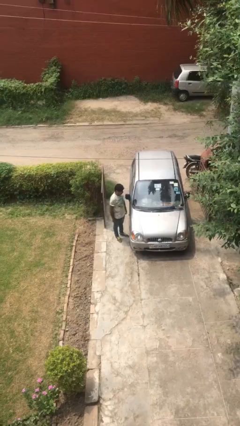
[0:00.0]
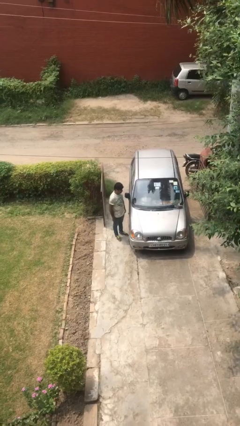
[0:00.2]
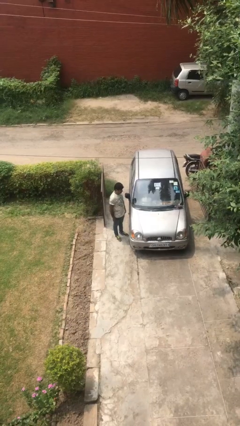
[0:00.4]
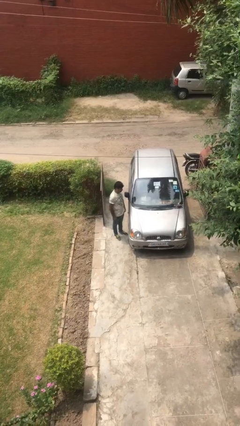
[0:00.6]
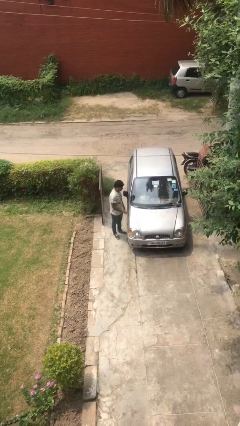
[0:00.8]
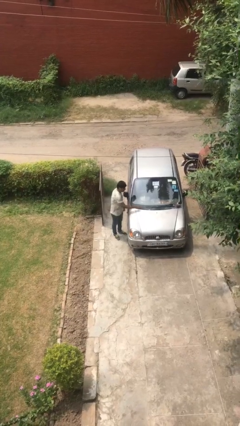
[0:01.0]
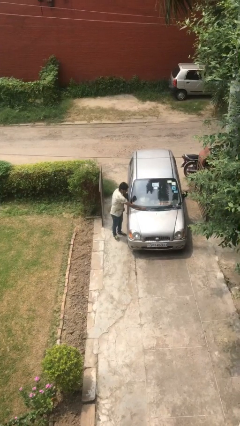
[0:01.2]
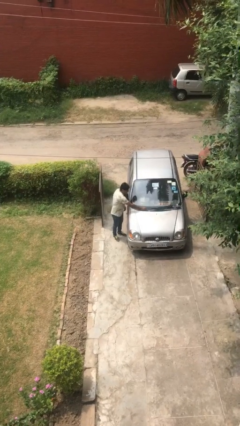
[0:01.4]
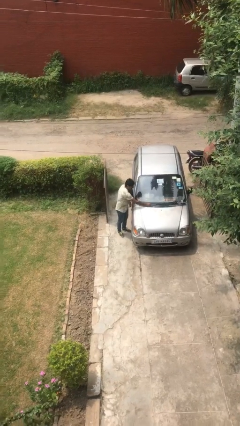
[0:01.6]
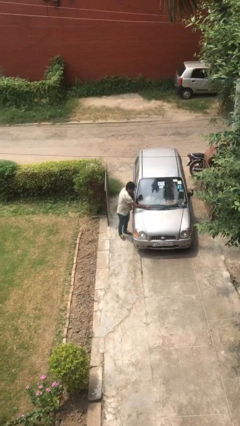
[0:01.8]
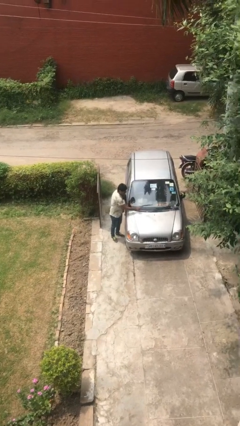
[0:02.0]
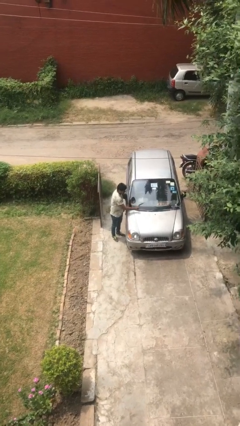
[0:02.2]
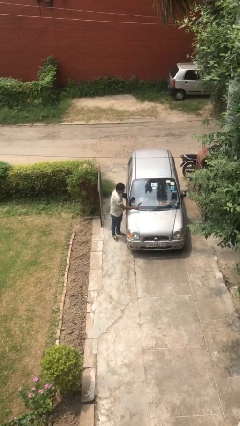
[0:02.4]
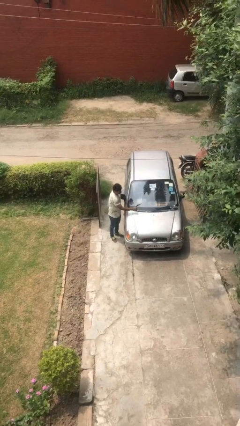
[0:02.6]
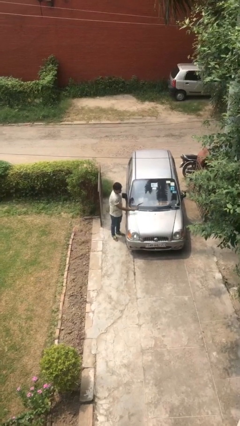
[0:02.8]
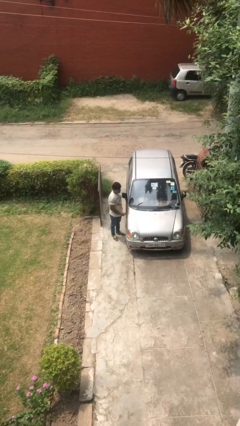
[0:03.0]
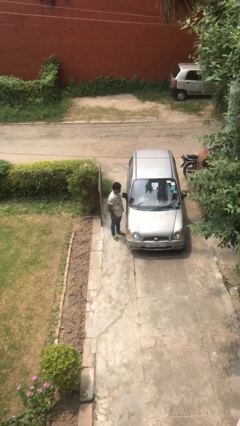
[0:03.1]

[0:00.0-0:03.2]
person flips up car wipers

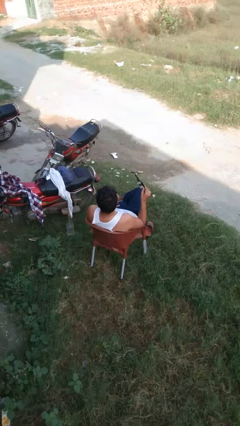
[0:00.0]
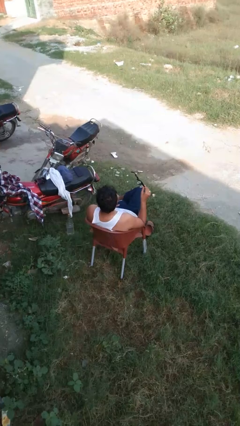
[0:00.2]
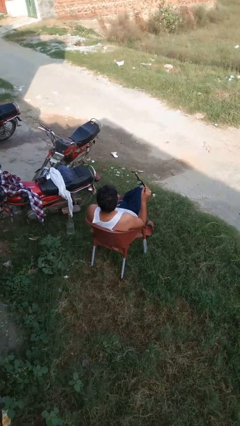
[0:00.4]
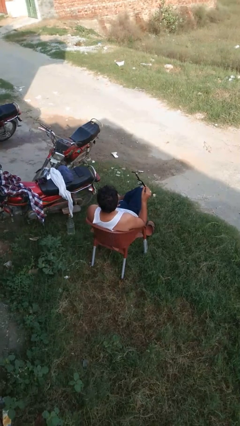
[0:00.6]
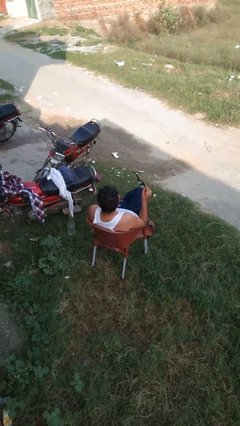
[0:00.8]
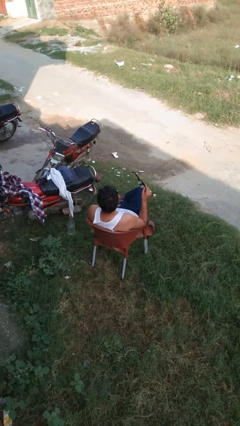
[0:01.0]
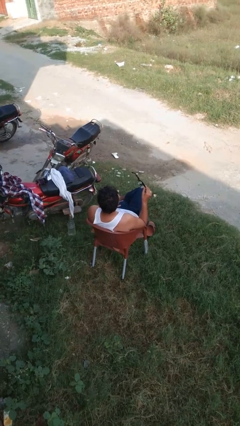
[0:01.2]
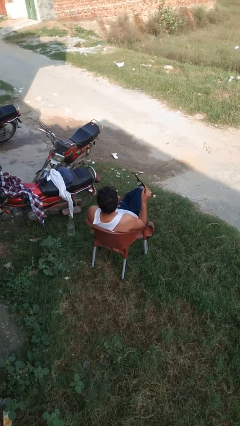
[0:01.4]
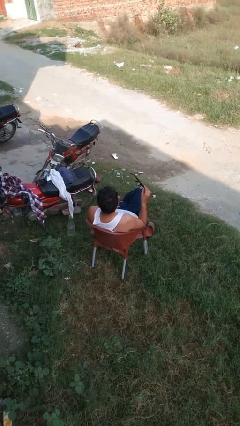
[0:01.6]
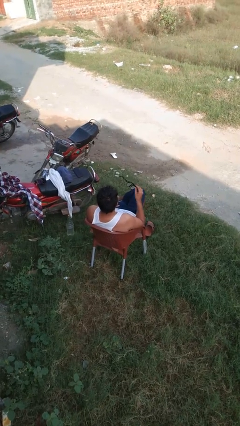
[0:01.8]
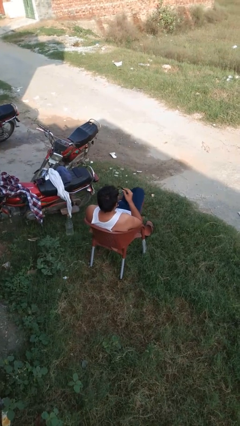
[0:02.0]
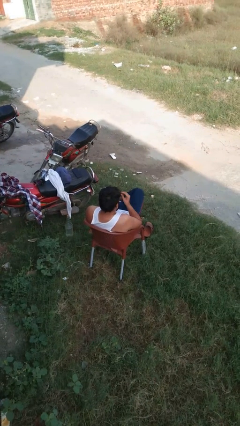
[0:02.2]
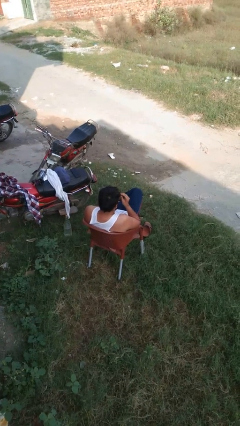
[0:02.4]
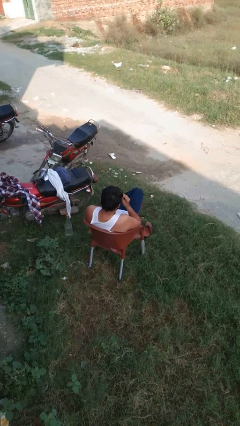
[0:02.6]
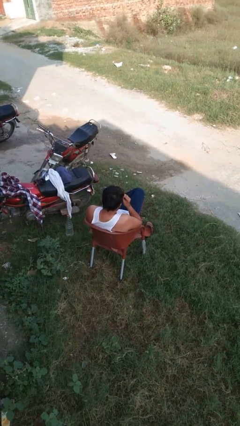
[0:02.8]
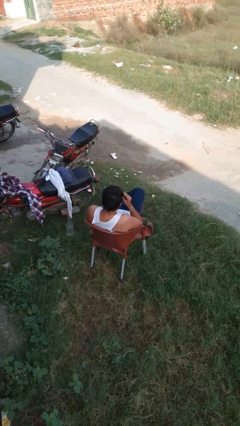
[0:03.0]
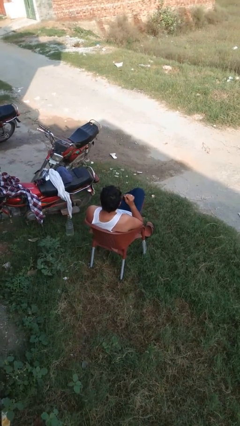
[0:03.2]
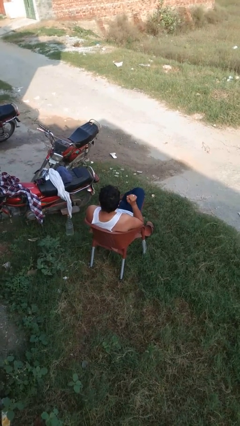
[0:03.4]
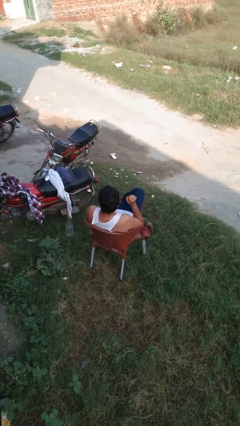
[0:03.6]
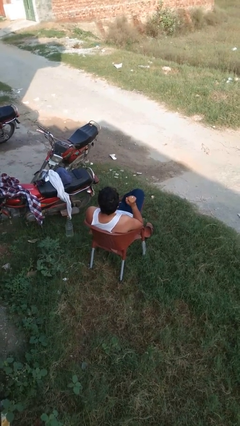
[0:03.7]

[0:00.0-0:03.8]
person puts on glasses

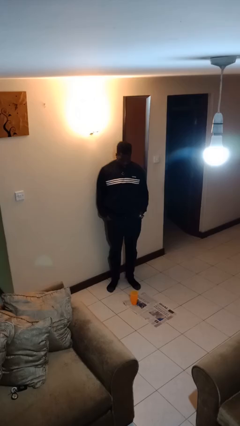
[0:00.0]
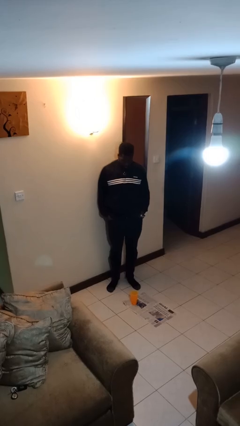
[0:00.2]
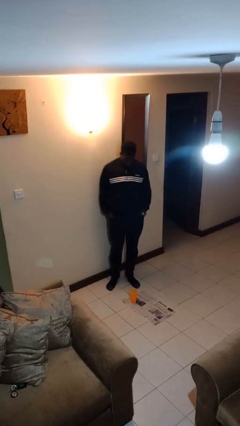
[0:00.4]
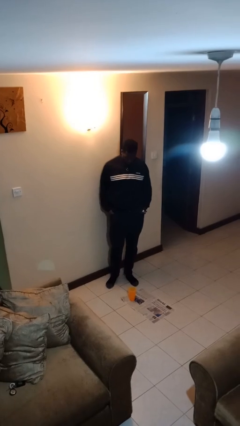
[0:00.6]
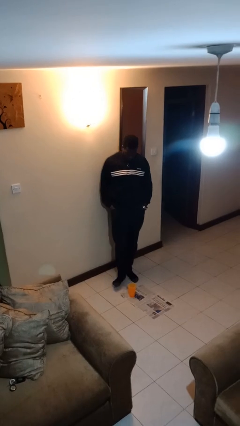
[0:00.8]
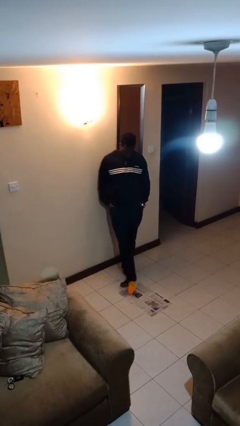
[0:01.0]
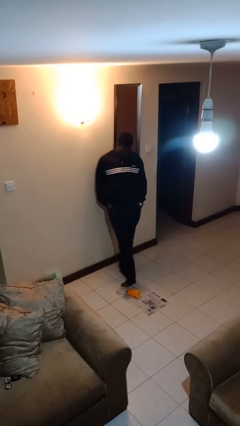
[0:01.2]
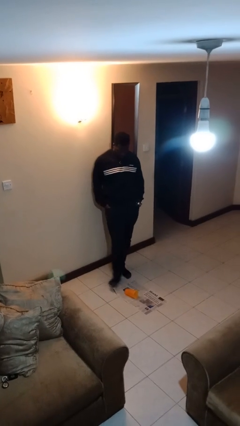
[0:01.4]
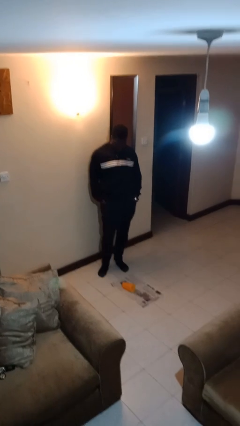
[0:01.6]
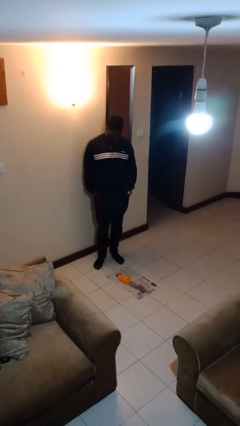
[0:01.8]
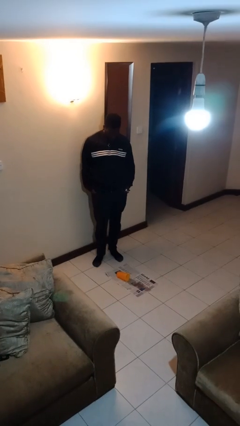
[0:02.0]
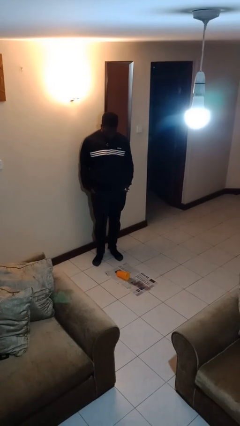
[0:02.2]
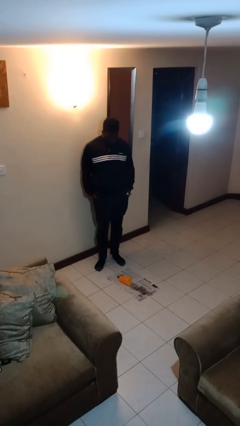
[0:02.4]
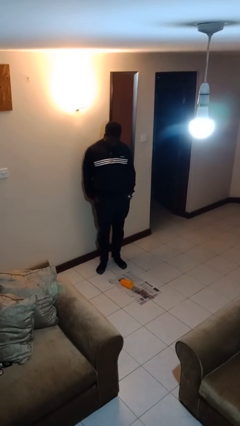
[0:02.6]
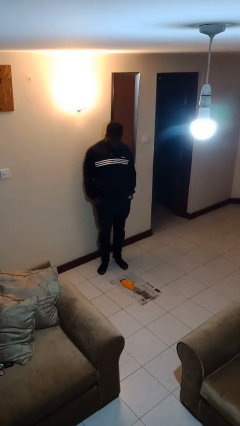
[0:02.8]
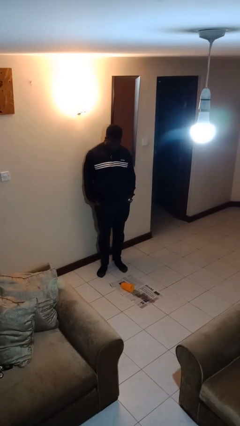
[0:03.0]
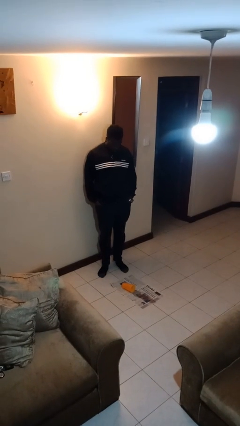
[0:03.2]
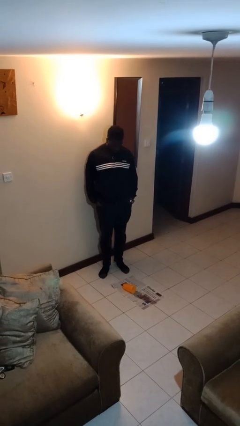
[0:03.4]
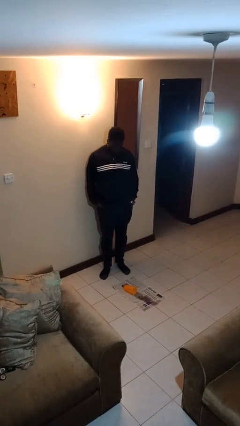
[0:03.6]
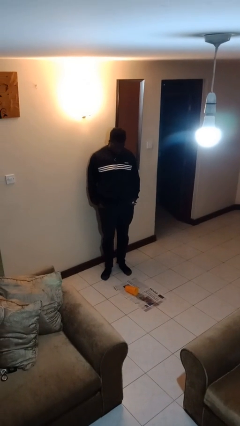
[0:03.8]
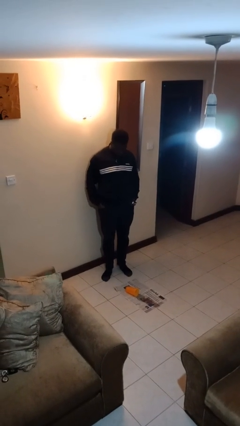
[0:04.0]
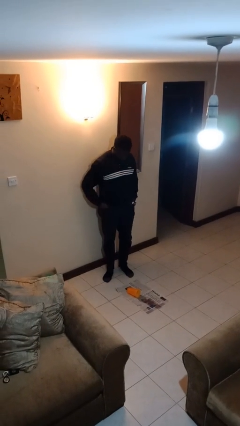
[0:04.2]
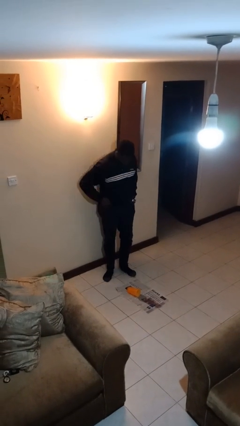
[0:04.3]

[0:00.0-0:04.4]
person spills on floor

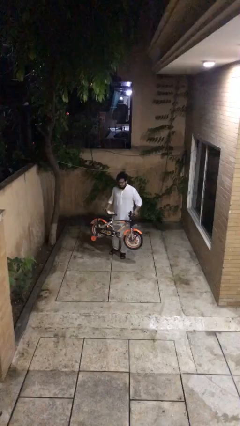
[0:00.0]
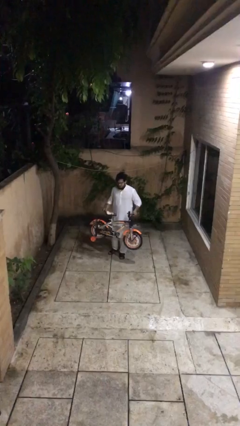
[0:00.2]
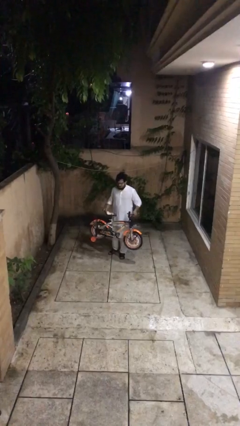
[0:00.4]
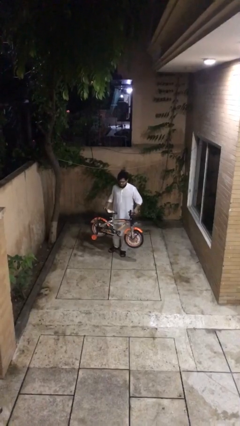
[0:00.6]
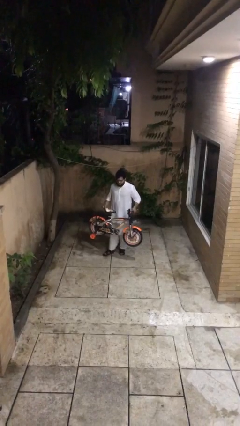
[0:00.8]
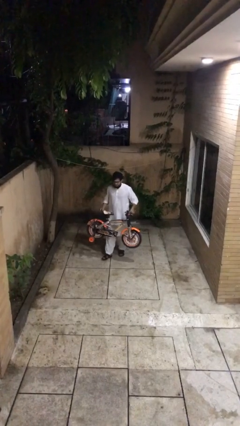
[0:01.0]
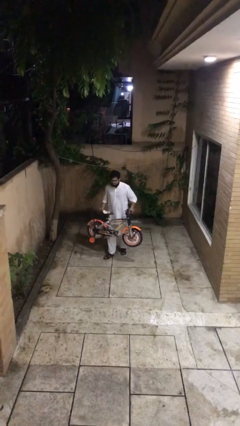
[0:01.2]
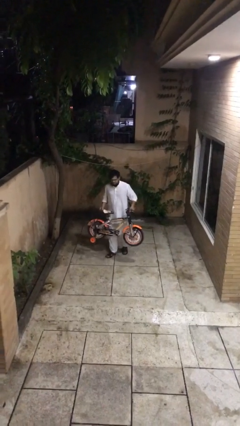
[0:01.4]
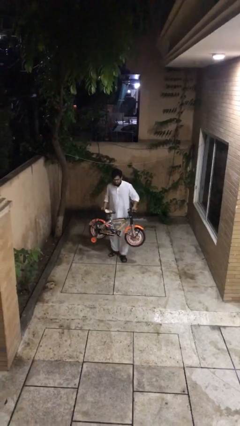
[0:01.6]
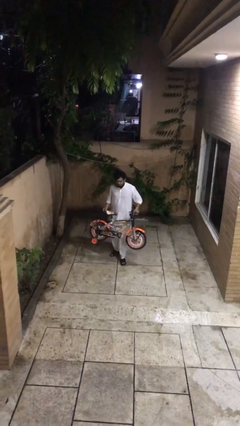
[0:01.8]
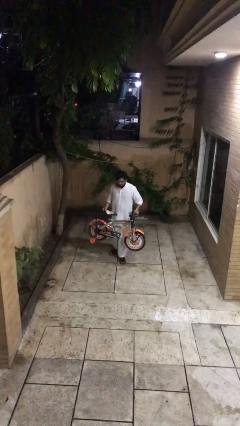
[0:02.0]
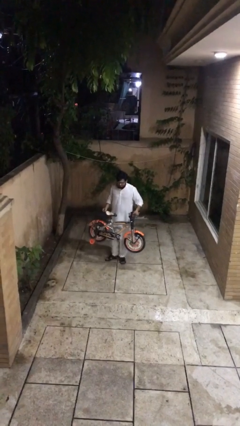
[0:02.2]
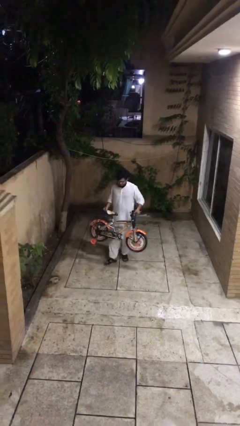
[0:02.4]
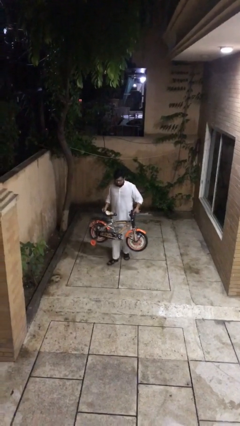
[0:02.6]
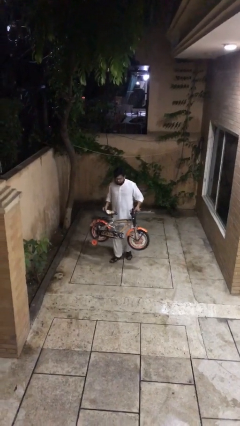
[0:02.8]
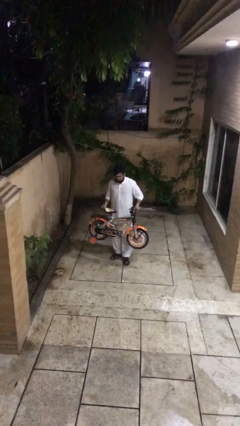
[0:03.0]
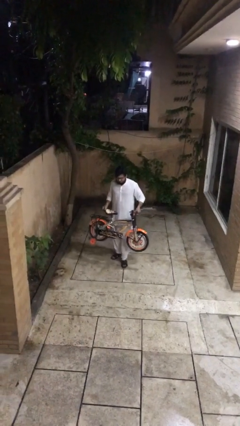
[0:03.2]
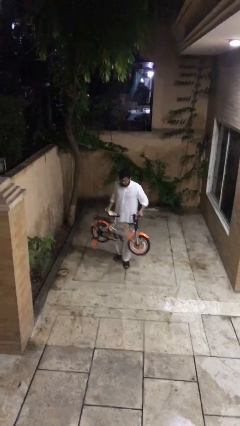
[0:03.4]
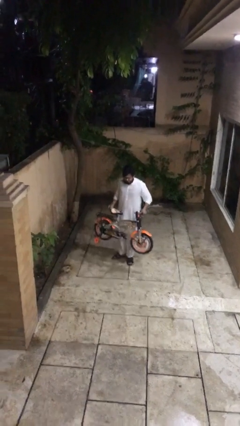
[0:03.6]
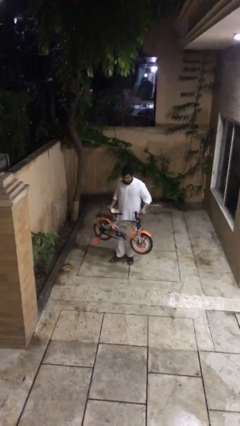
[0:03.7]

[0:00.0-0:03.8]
person carries heavy object

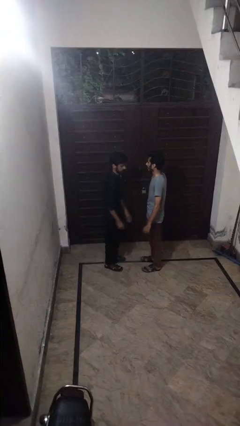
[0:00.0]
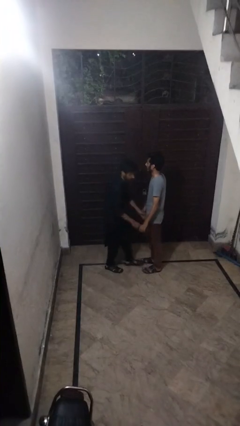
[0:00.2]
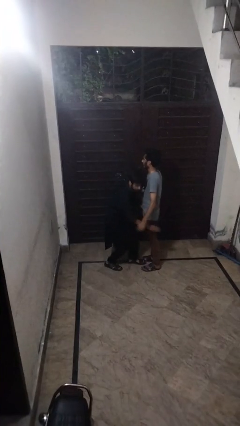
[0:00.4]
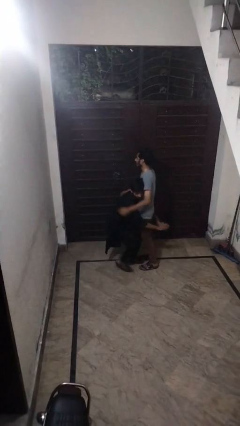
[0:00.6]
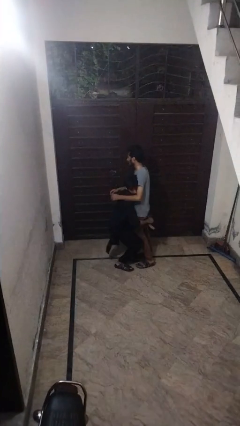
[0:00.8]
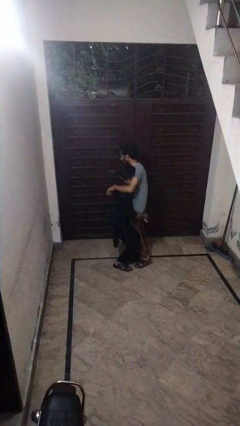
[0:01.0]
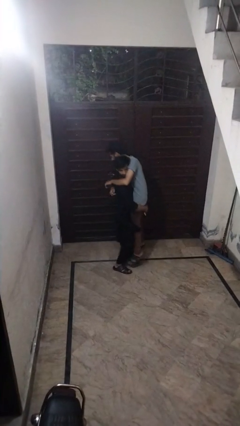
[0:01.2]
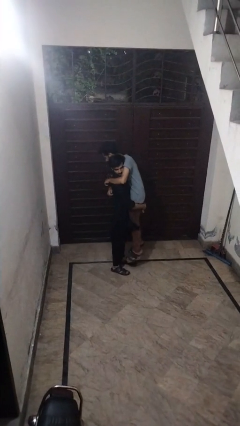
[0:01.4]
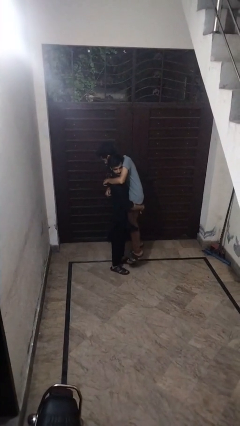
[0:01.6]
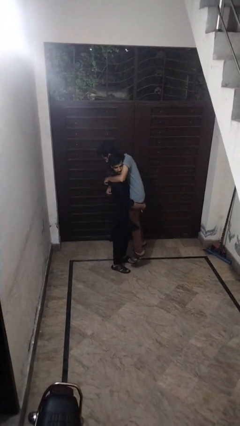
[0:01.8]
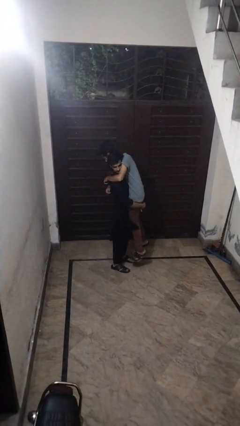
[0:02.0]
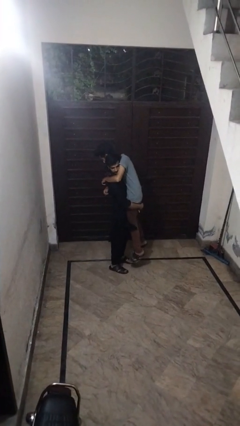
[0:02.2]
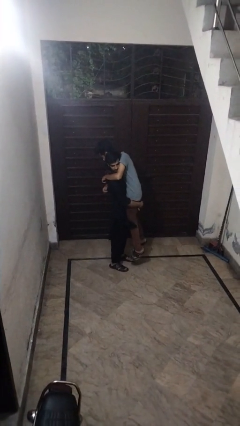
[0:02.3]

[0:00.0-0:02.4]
person picks up person

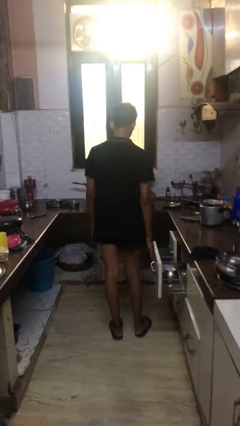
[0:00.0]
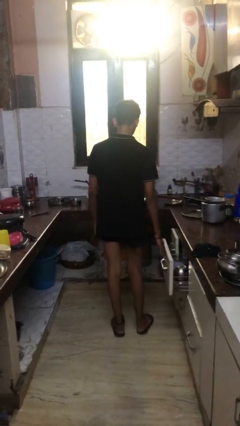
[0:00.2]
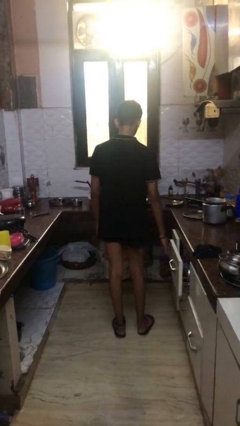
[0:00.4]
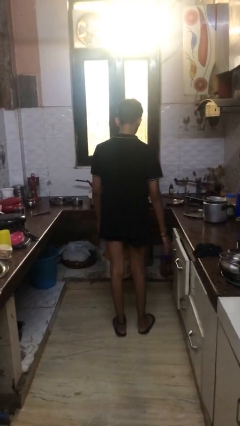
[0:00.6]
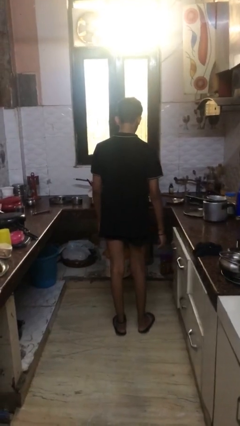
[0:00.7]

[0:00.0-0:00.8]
person closes kitchen drawer
